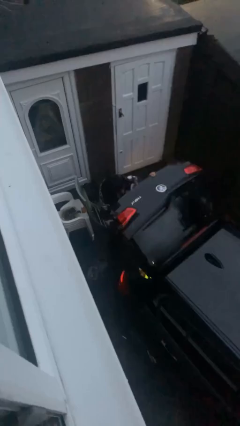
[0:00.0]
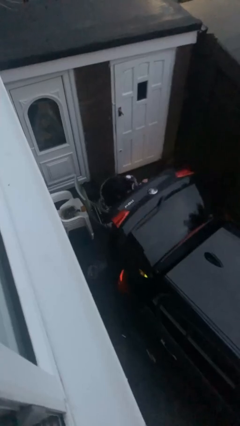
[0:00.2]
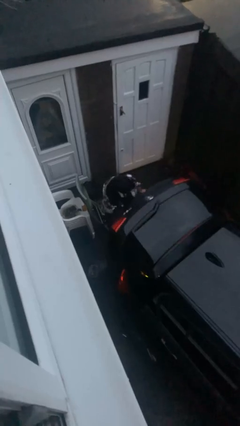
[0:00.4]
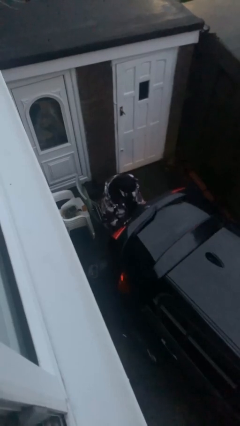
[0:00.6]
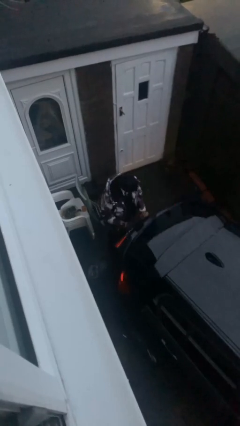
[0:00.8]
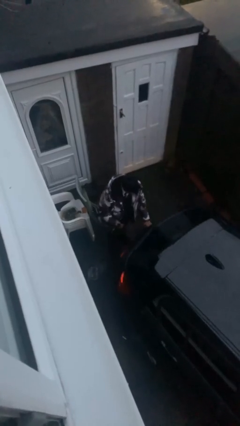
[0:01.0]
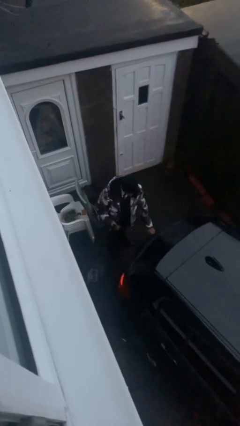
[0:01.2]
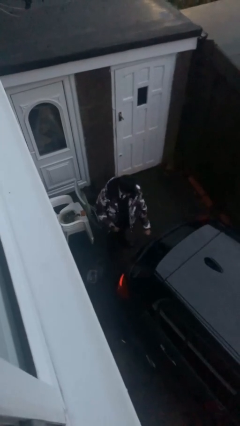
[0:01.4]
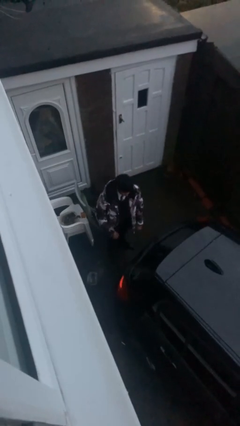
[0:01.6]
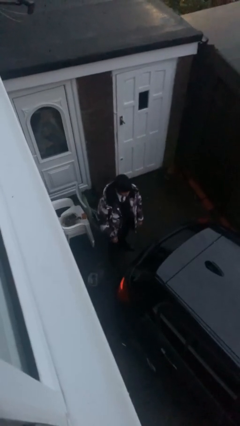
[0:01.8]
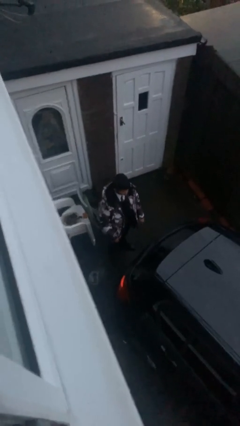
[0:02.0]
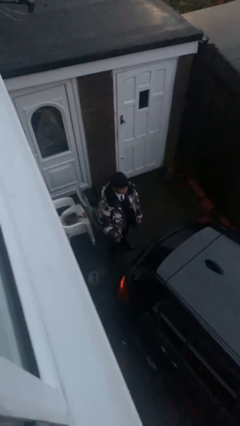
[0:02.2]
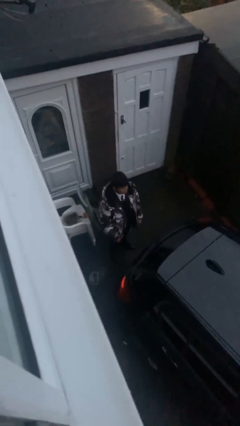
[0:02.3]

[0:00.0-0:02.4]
person closes car trunk

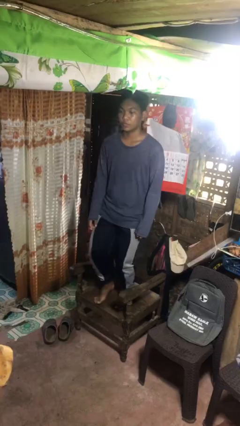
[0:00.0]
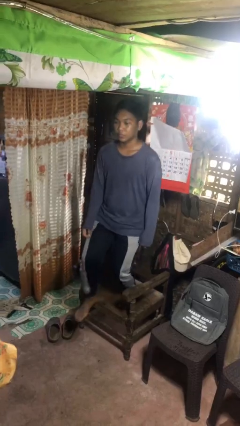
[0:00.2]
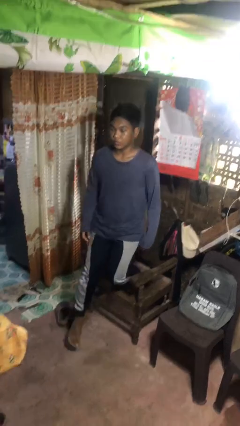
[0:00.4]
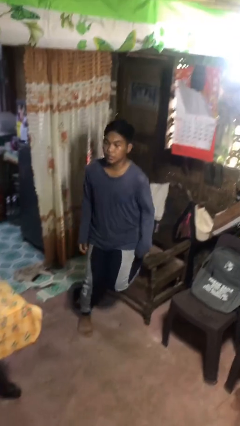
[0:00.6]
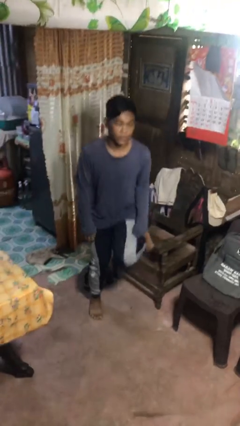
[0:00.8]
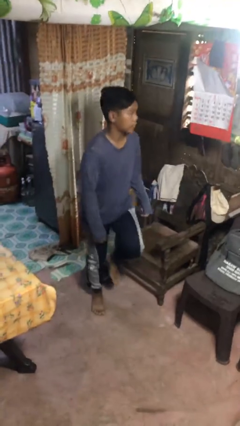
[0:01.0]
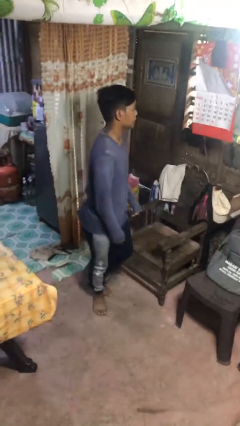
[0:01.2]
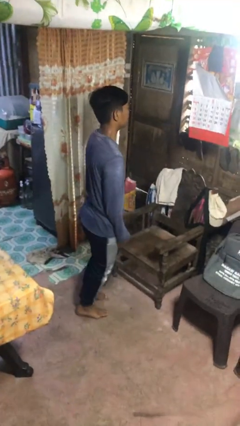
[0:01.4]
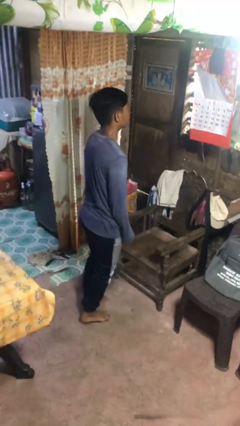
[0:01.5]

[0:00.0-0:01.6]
person climbs off chair

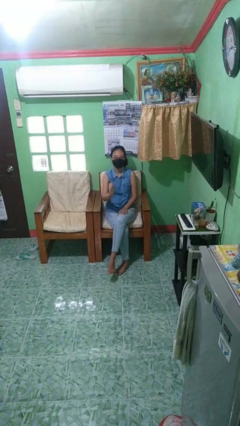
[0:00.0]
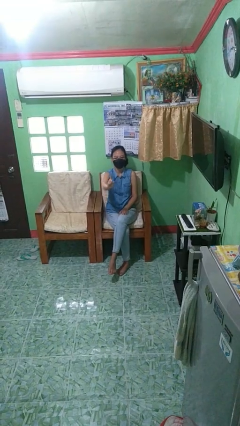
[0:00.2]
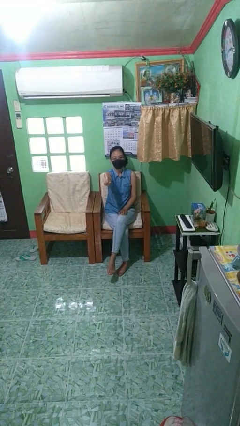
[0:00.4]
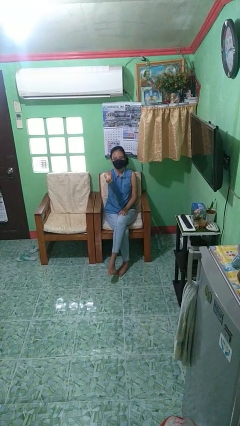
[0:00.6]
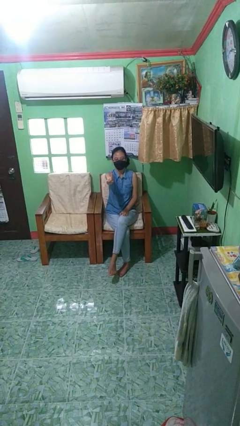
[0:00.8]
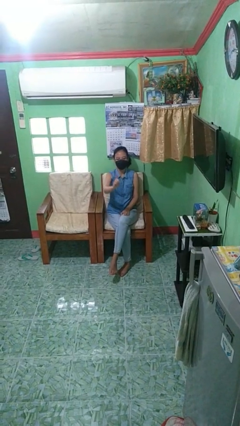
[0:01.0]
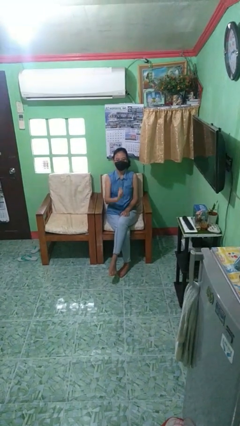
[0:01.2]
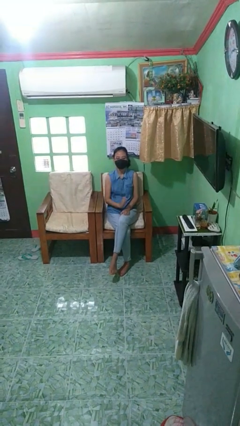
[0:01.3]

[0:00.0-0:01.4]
person gestures number one

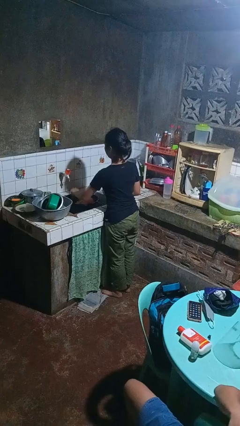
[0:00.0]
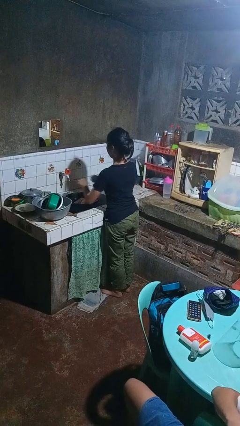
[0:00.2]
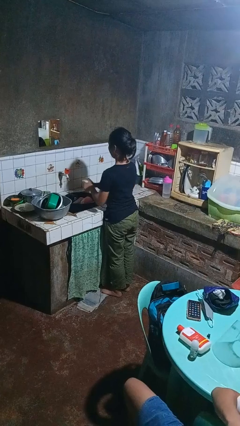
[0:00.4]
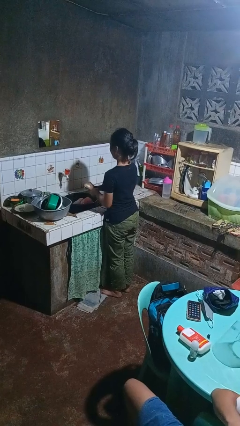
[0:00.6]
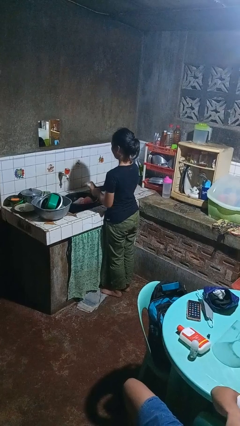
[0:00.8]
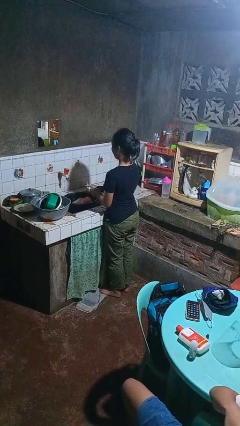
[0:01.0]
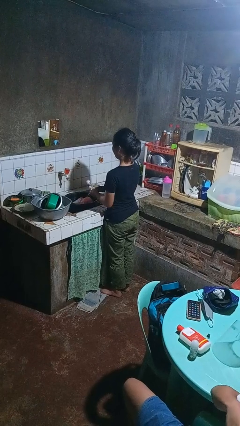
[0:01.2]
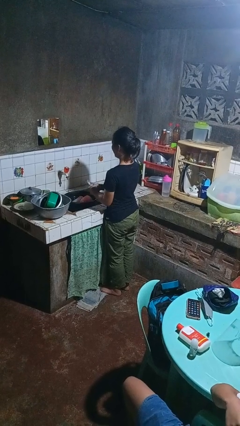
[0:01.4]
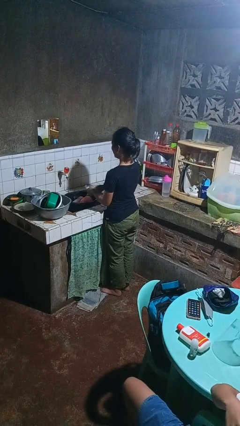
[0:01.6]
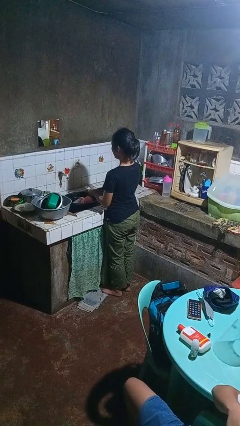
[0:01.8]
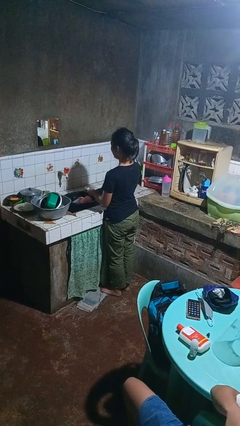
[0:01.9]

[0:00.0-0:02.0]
person washes dish

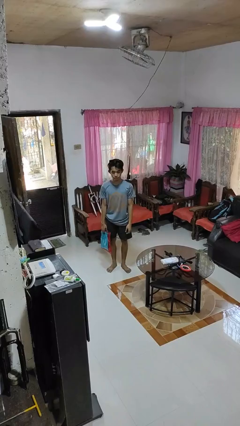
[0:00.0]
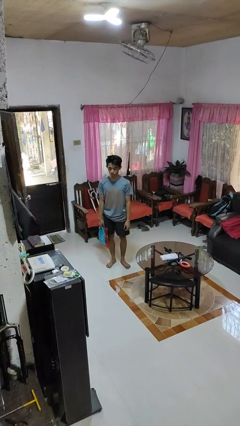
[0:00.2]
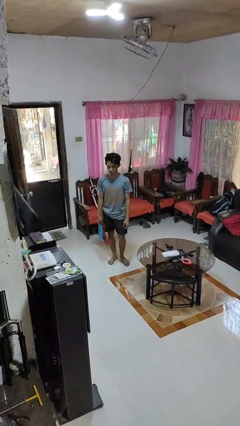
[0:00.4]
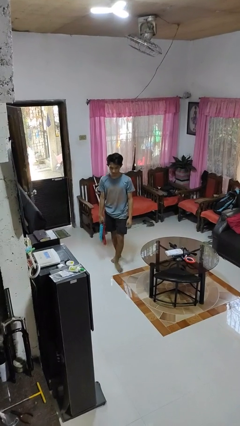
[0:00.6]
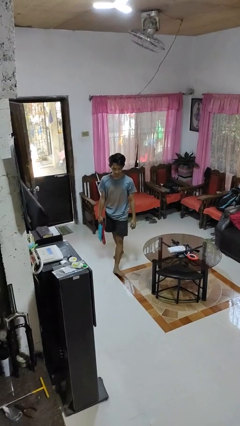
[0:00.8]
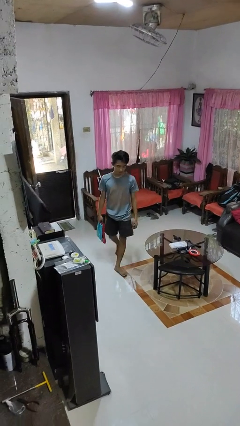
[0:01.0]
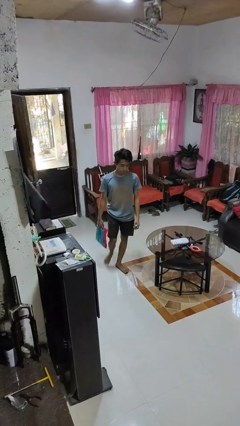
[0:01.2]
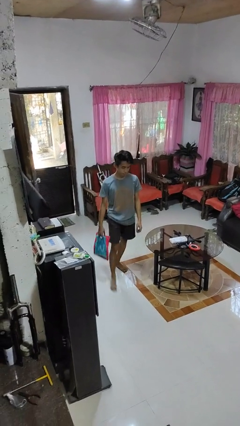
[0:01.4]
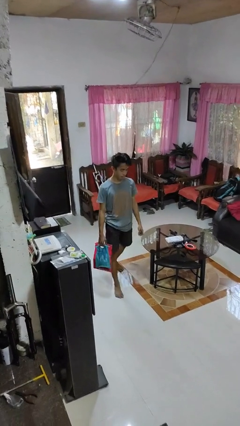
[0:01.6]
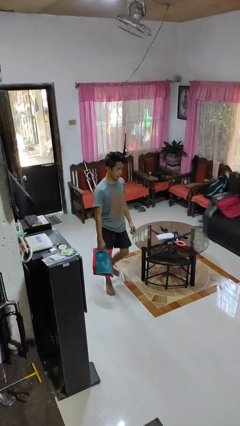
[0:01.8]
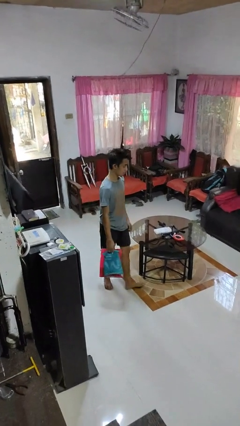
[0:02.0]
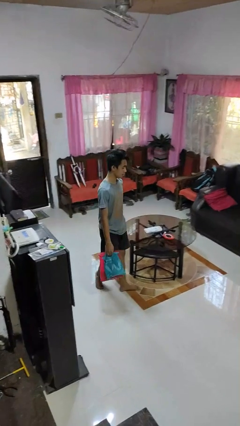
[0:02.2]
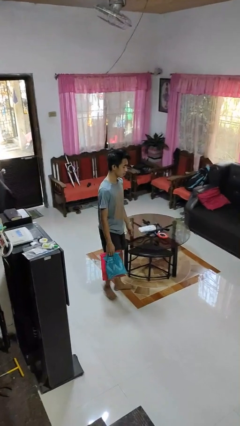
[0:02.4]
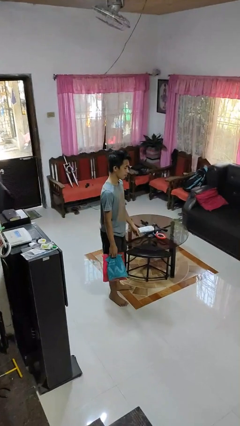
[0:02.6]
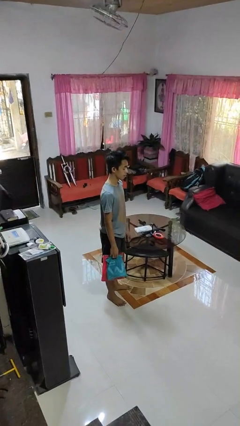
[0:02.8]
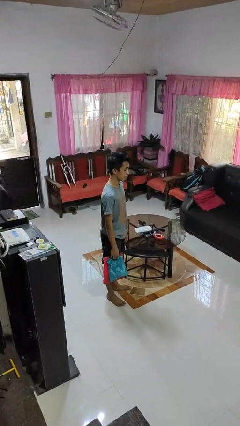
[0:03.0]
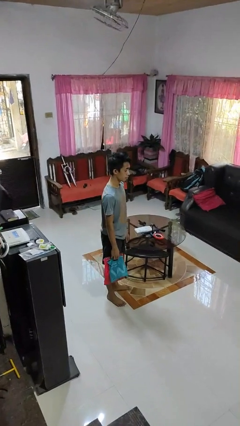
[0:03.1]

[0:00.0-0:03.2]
person carries groceries

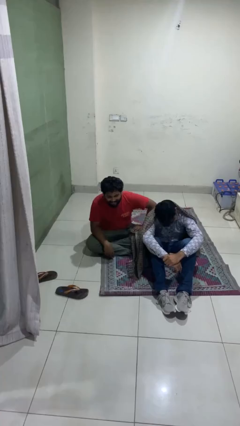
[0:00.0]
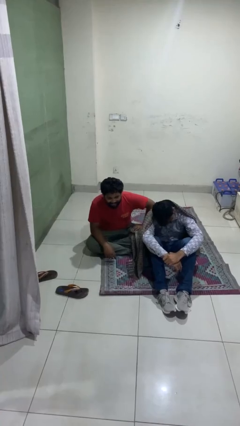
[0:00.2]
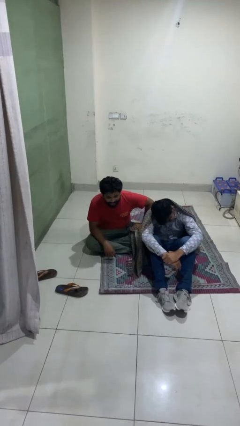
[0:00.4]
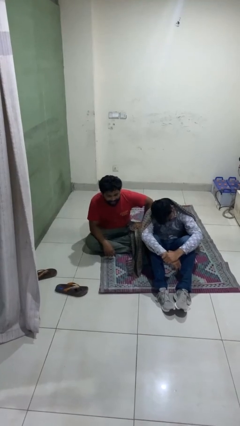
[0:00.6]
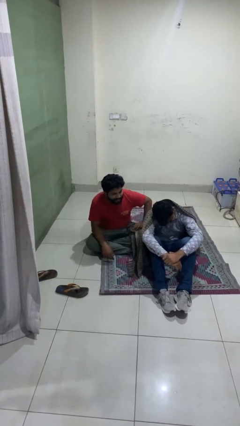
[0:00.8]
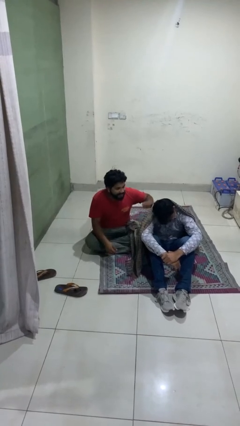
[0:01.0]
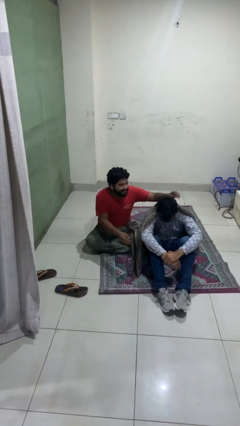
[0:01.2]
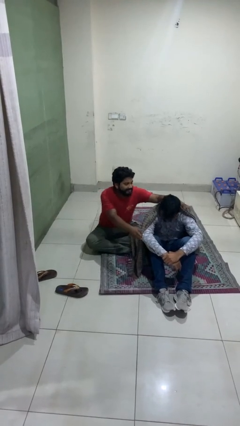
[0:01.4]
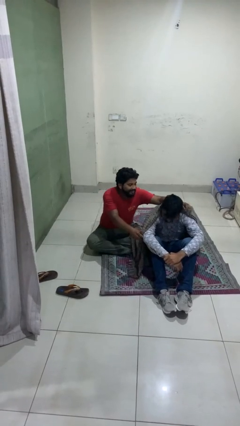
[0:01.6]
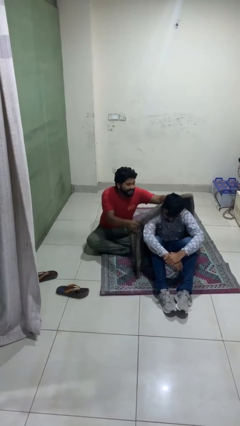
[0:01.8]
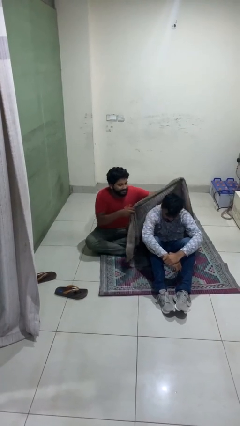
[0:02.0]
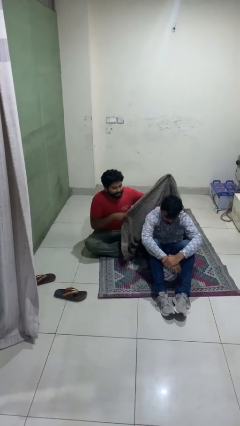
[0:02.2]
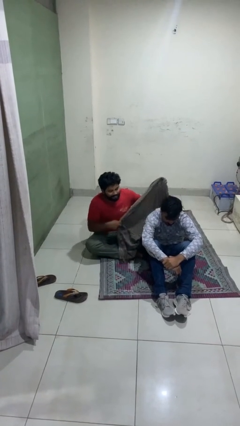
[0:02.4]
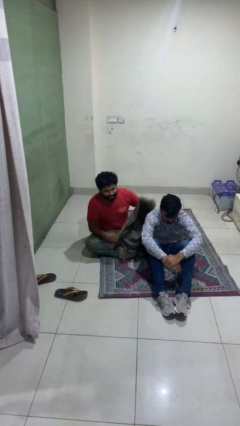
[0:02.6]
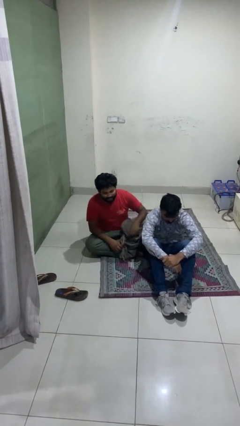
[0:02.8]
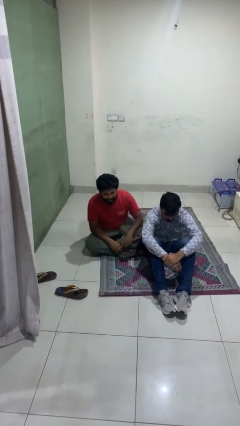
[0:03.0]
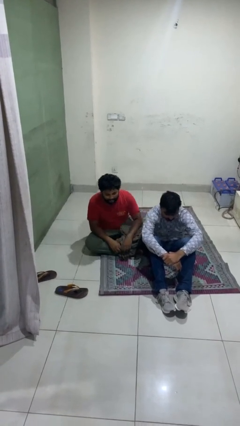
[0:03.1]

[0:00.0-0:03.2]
person uncovers friend with blanket

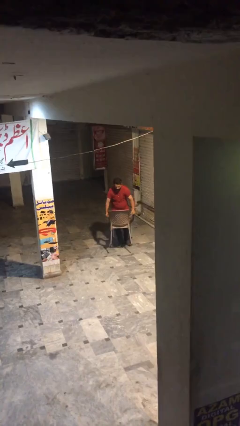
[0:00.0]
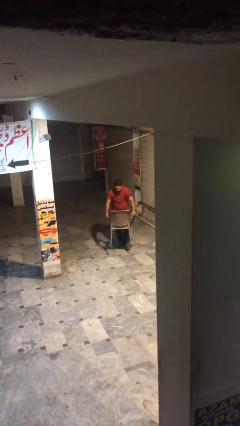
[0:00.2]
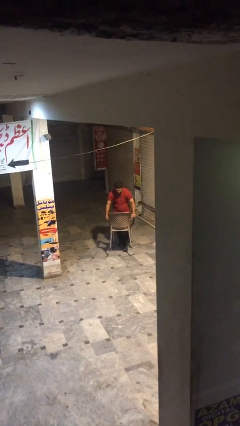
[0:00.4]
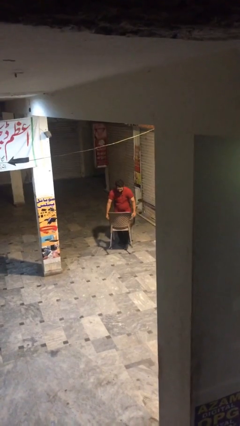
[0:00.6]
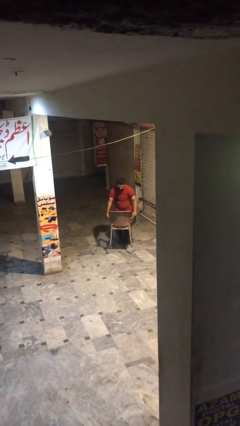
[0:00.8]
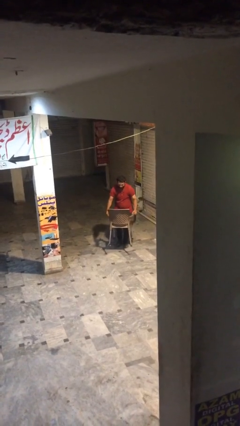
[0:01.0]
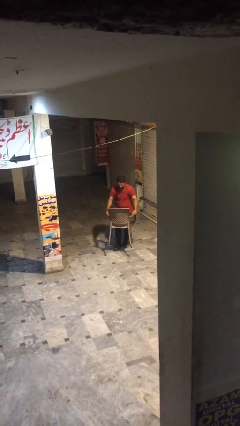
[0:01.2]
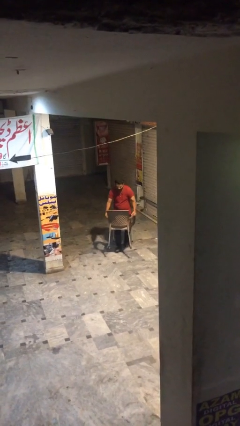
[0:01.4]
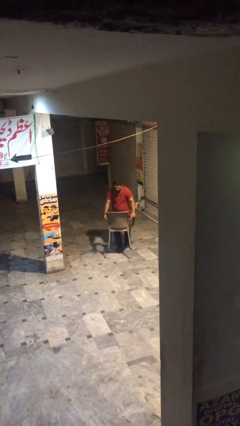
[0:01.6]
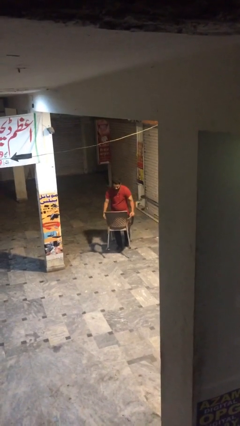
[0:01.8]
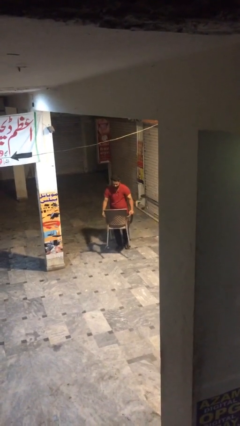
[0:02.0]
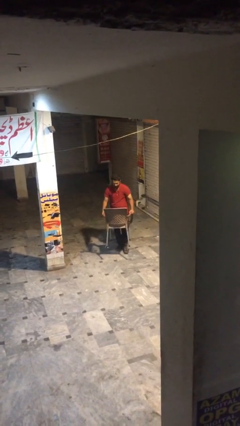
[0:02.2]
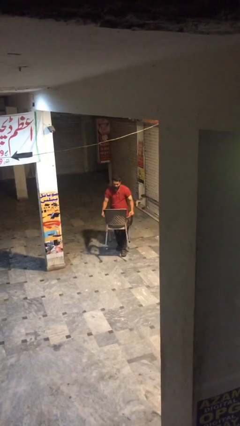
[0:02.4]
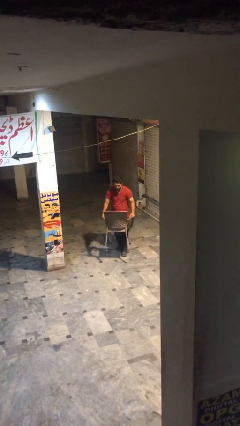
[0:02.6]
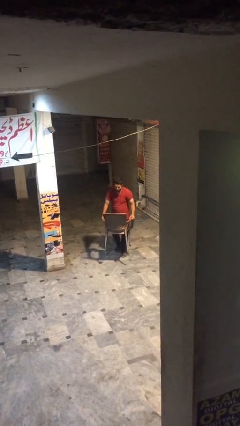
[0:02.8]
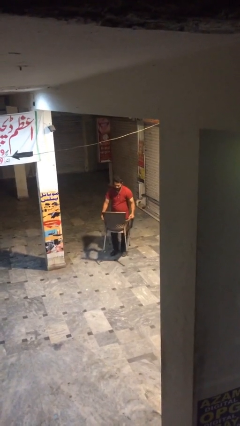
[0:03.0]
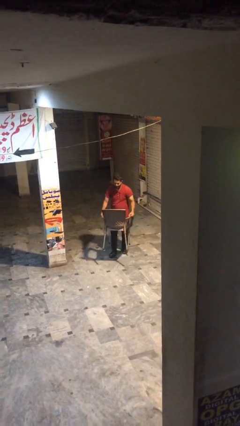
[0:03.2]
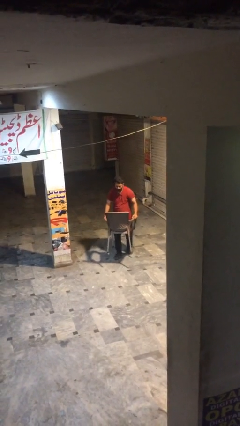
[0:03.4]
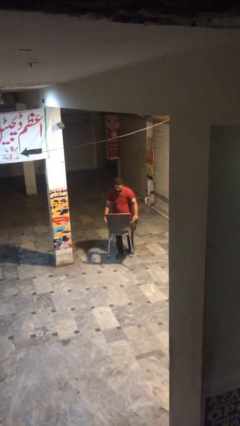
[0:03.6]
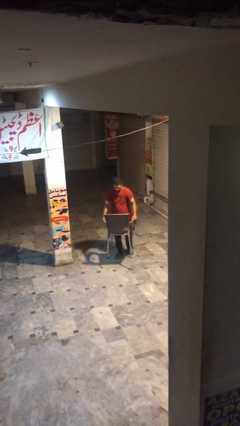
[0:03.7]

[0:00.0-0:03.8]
person carries heavy object
